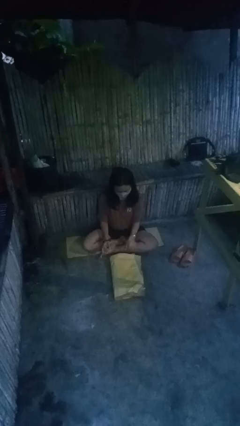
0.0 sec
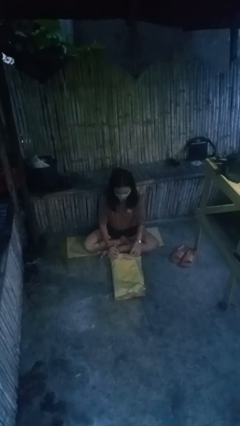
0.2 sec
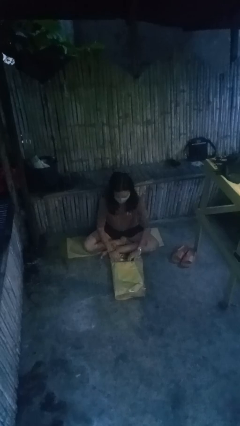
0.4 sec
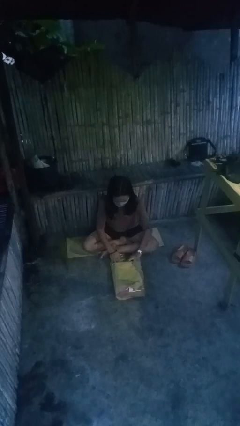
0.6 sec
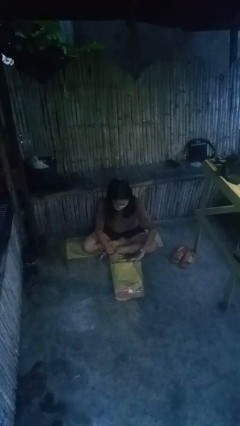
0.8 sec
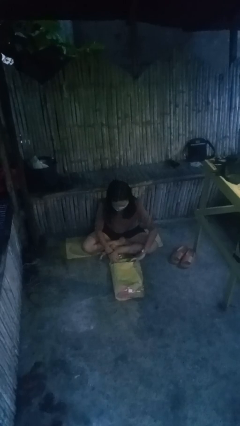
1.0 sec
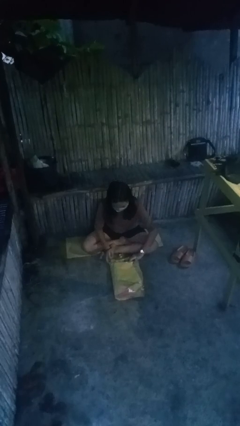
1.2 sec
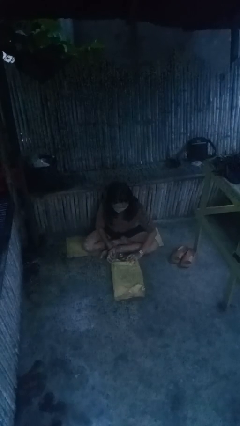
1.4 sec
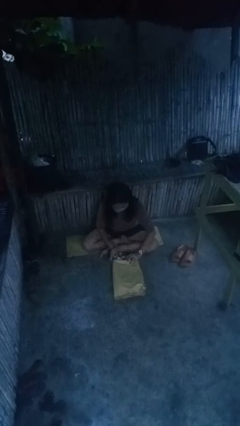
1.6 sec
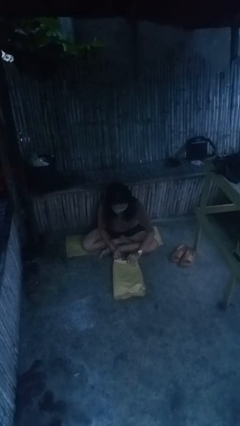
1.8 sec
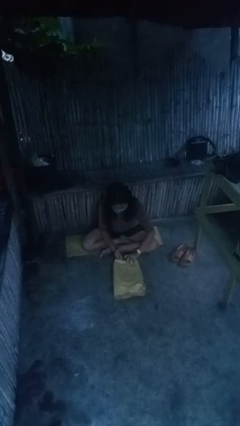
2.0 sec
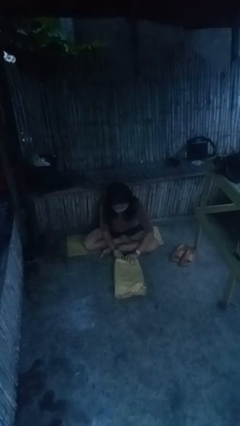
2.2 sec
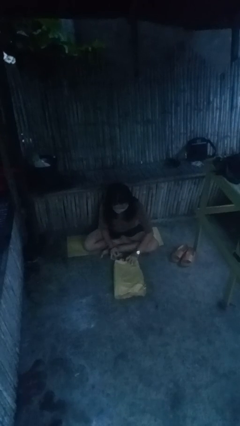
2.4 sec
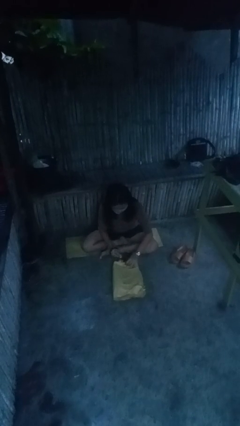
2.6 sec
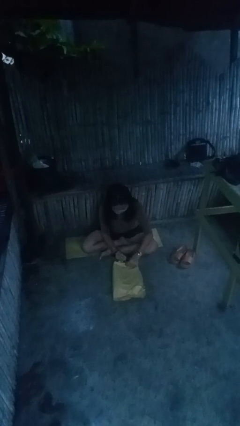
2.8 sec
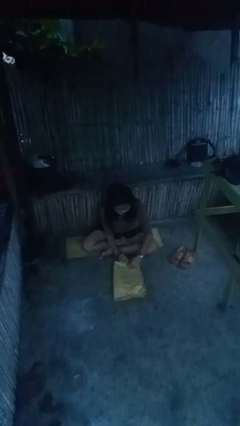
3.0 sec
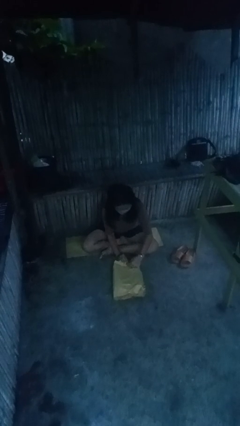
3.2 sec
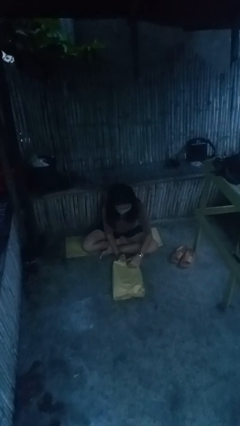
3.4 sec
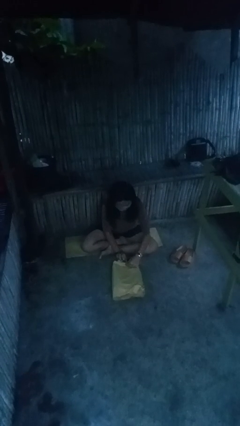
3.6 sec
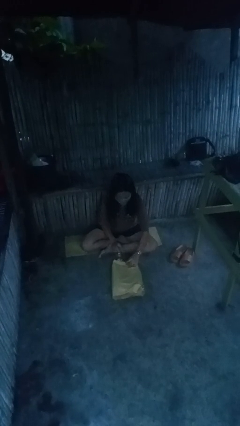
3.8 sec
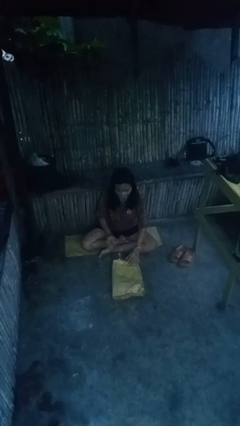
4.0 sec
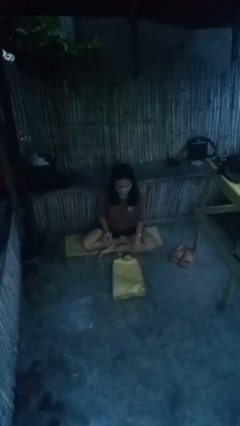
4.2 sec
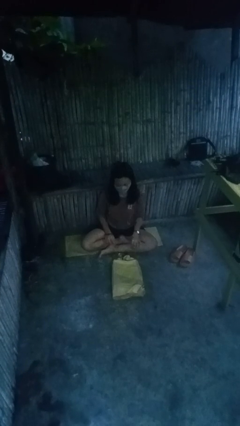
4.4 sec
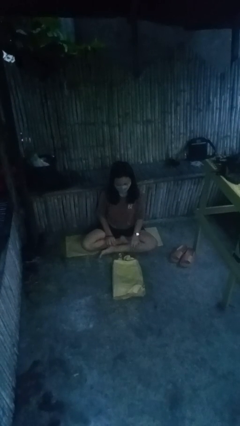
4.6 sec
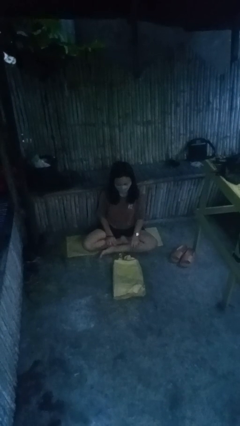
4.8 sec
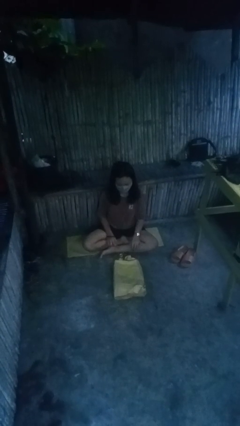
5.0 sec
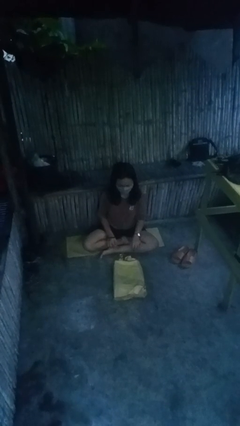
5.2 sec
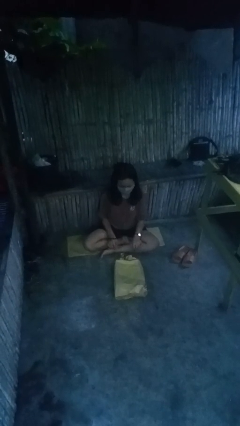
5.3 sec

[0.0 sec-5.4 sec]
person wraps box

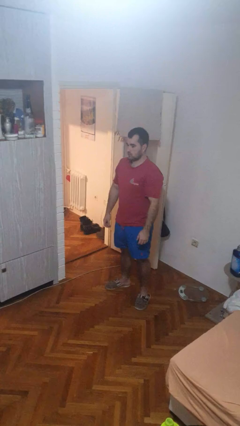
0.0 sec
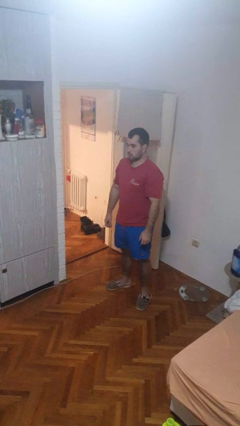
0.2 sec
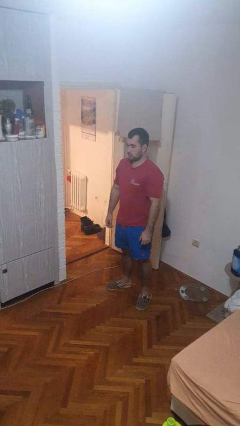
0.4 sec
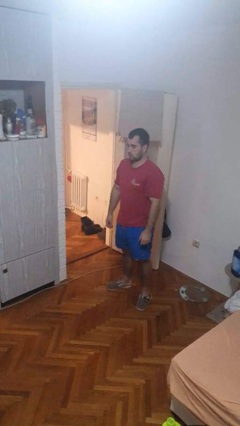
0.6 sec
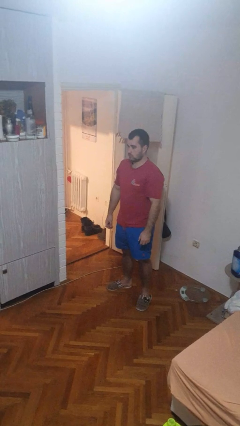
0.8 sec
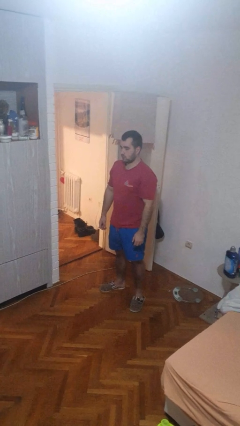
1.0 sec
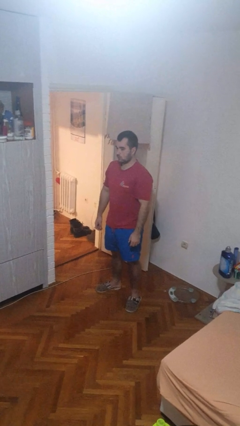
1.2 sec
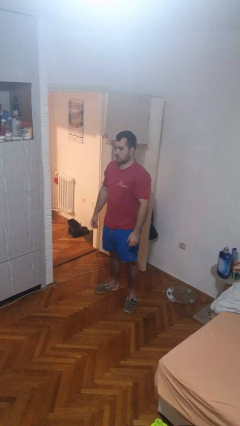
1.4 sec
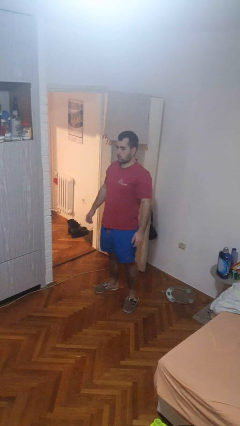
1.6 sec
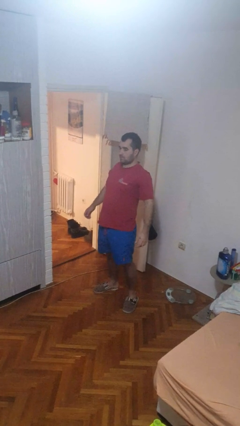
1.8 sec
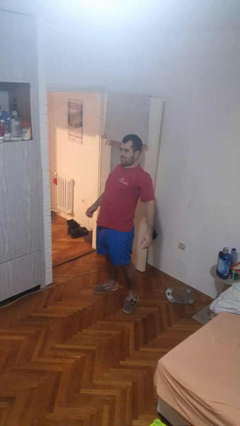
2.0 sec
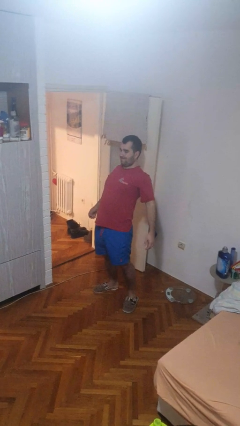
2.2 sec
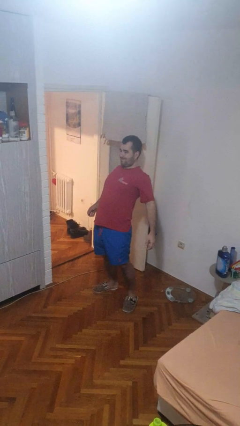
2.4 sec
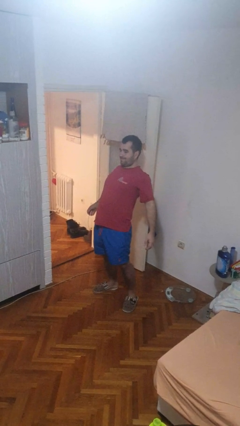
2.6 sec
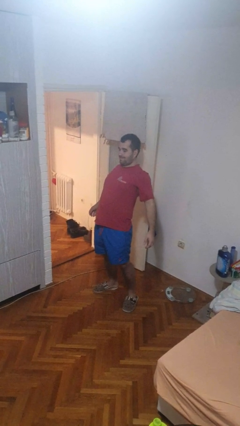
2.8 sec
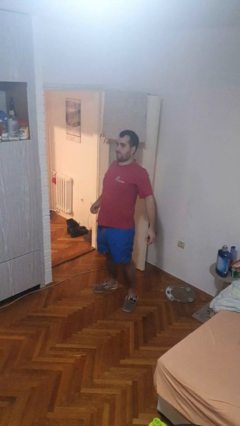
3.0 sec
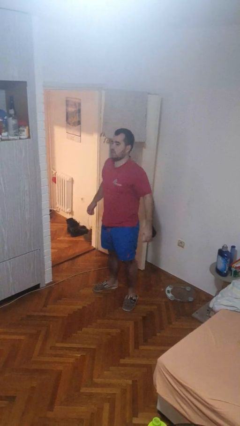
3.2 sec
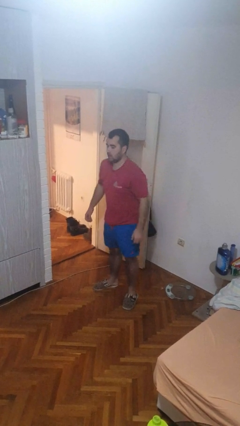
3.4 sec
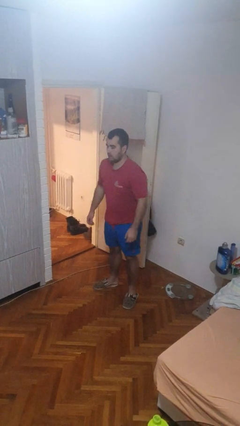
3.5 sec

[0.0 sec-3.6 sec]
person stretches back

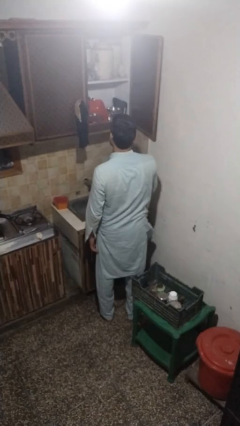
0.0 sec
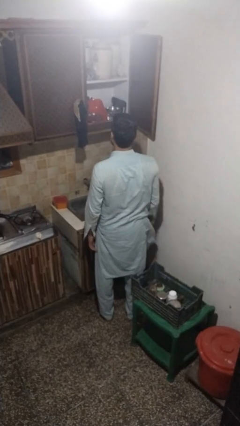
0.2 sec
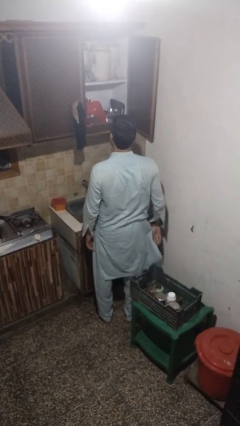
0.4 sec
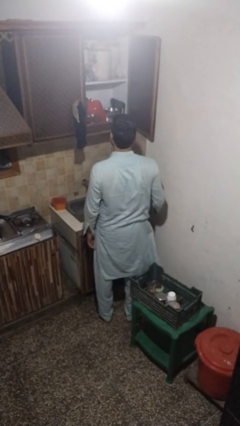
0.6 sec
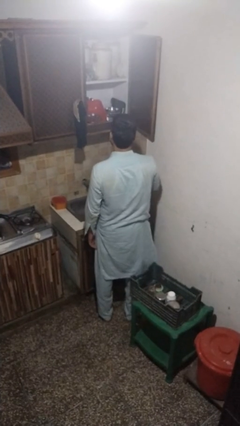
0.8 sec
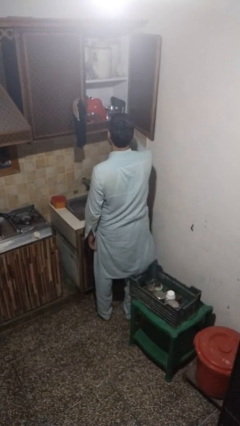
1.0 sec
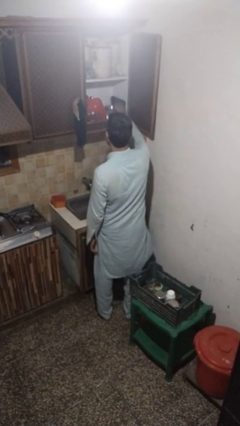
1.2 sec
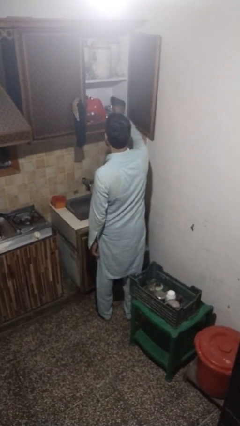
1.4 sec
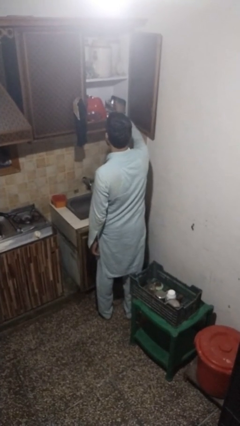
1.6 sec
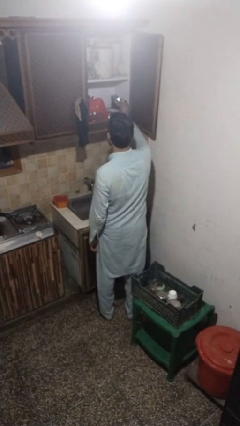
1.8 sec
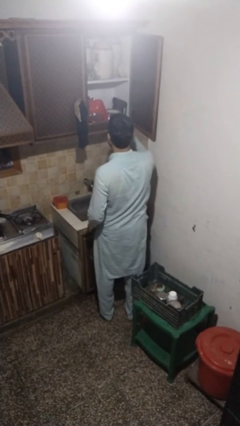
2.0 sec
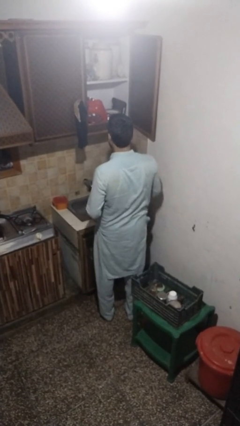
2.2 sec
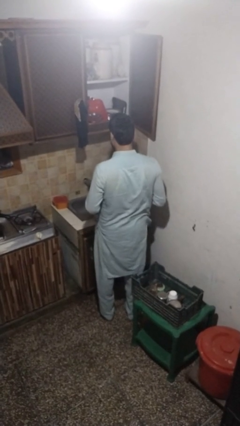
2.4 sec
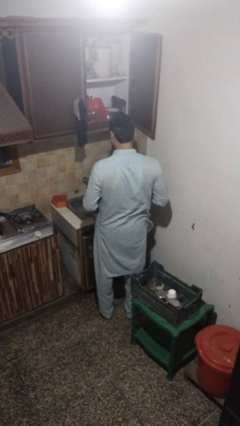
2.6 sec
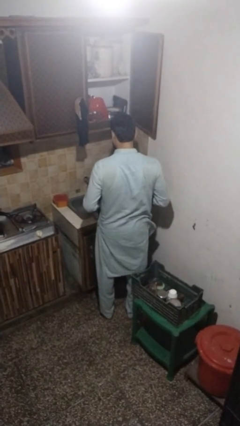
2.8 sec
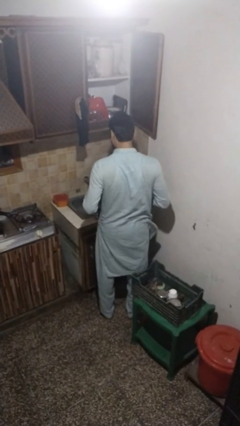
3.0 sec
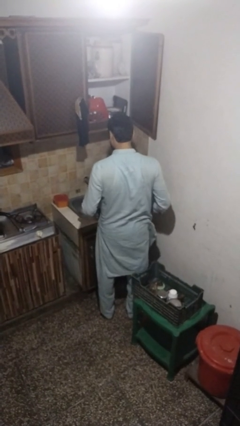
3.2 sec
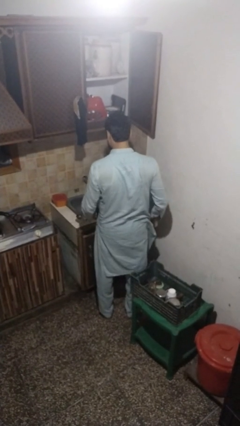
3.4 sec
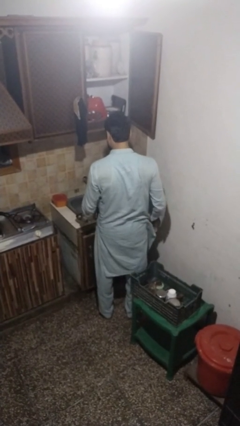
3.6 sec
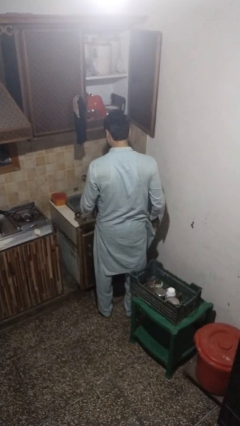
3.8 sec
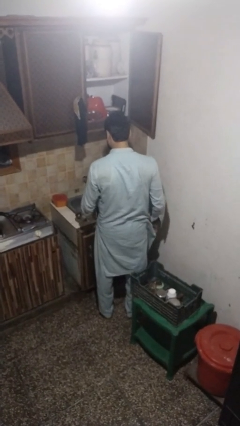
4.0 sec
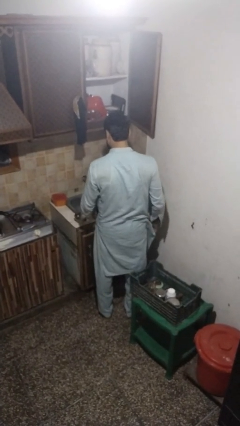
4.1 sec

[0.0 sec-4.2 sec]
person takes object from cabinet

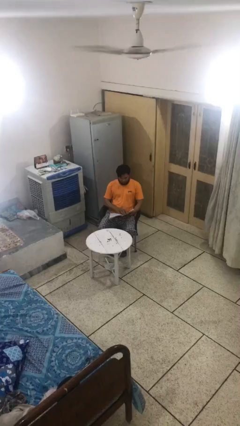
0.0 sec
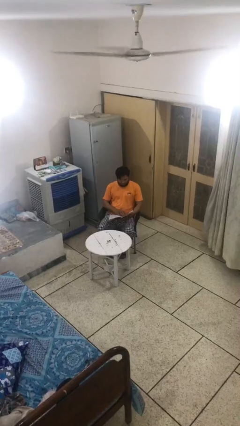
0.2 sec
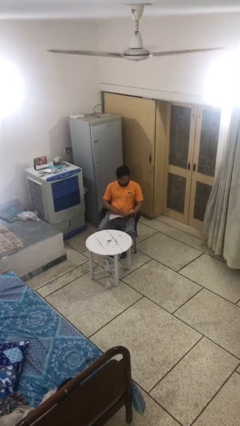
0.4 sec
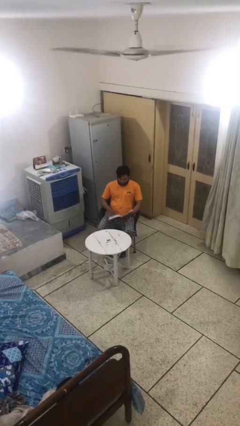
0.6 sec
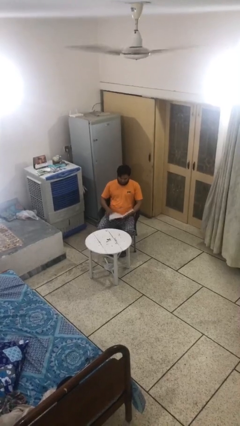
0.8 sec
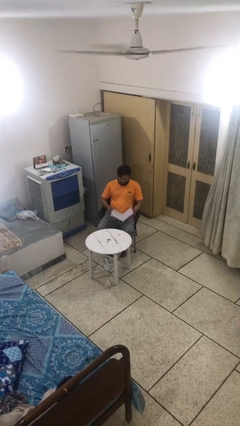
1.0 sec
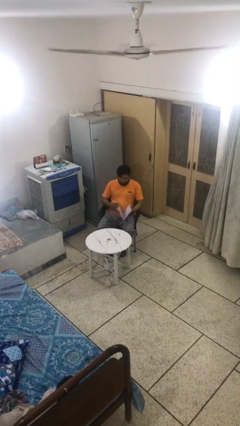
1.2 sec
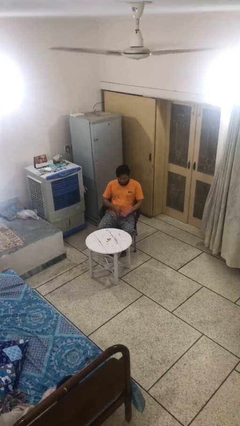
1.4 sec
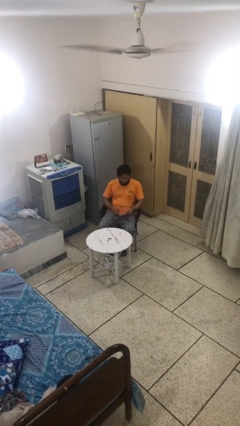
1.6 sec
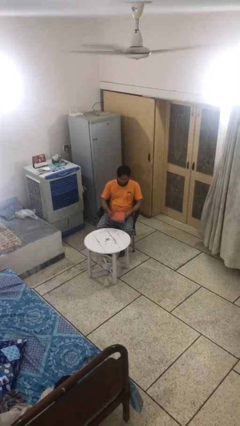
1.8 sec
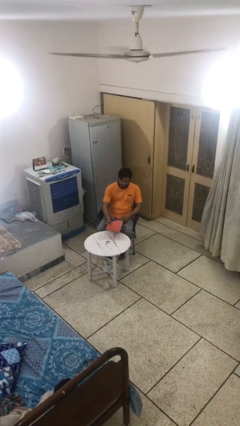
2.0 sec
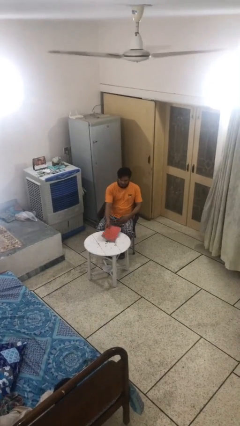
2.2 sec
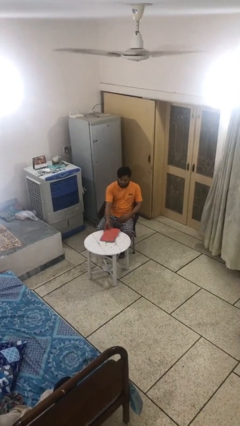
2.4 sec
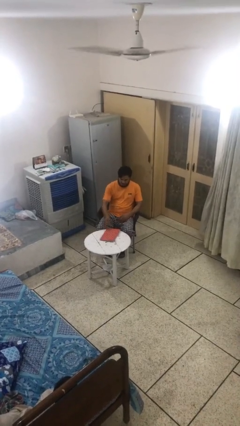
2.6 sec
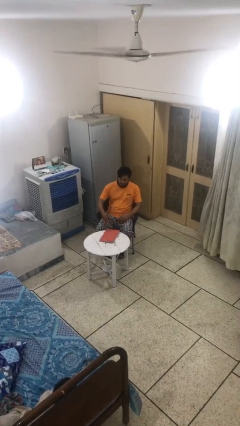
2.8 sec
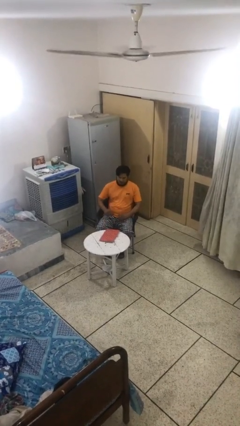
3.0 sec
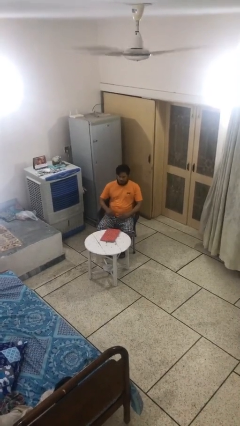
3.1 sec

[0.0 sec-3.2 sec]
person puts down object on table

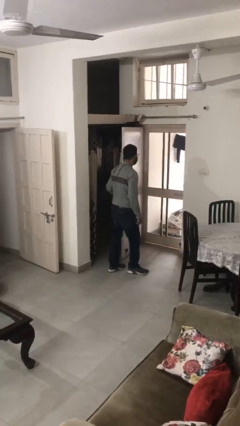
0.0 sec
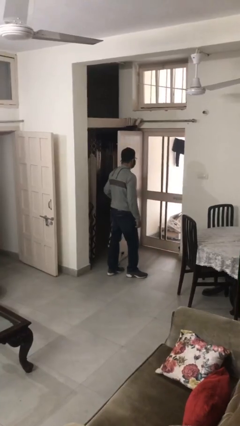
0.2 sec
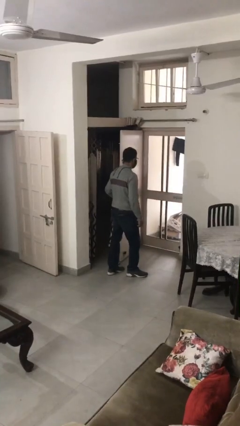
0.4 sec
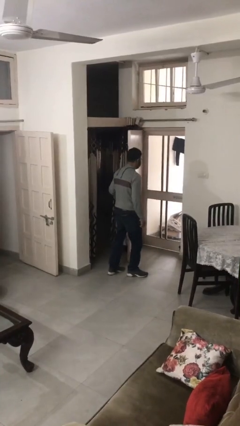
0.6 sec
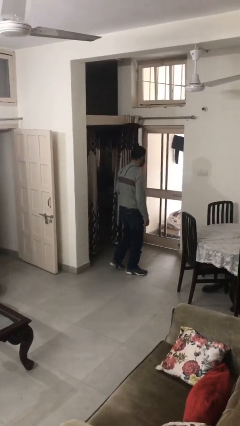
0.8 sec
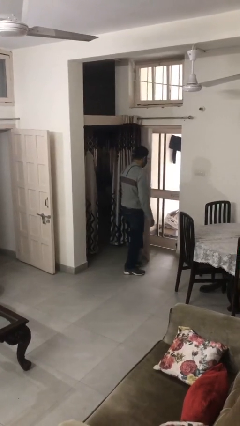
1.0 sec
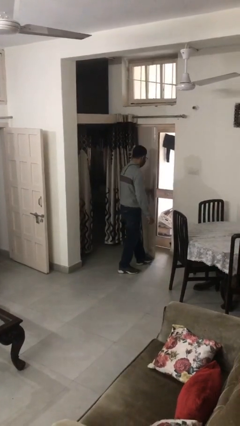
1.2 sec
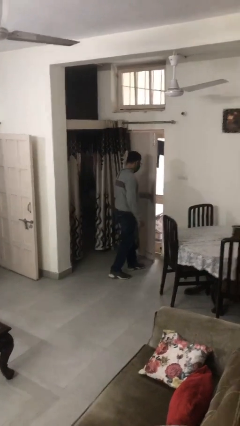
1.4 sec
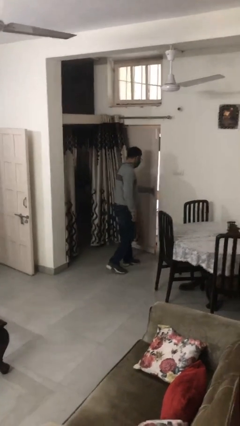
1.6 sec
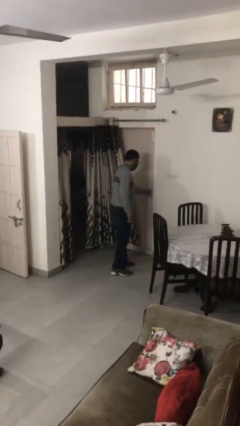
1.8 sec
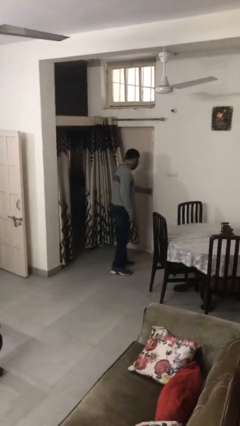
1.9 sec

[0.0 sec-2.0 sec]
person closes facility door
